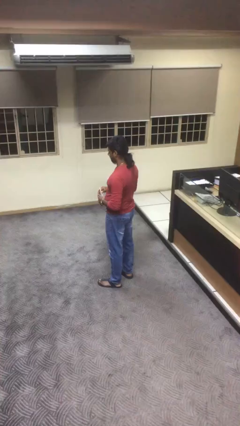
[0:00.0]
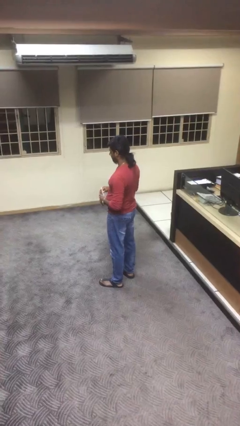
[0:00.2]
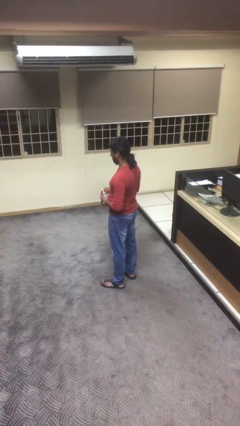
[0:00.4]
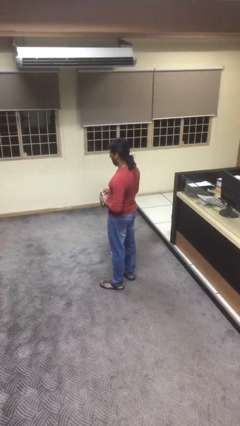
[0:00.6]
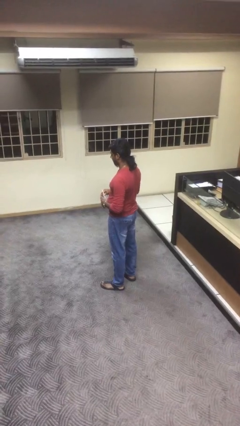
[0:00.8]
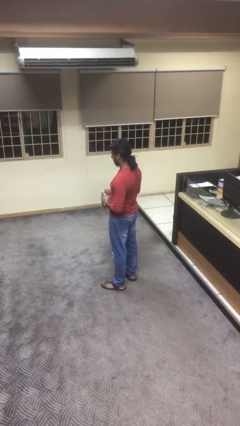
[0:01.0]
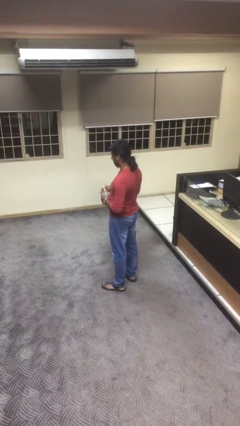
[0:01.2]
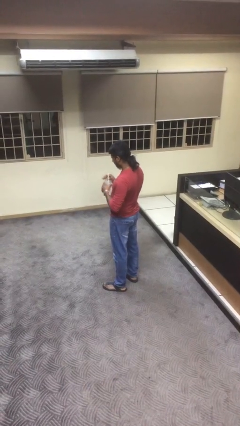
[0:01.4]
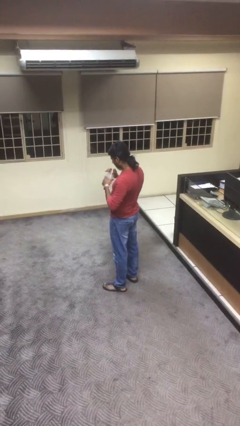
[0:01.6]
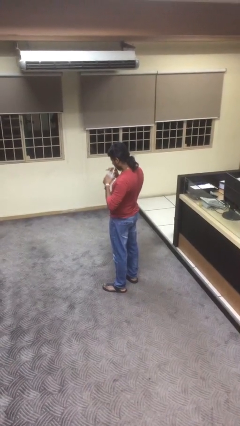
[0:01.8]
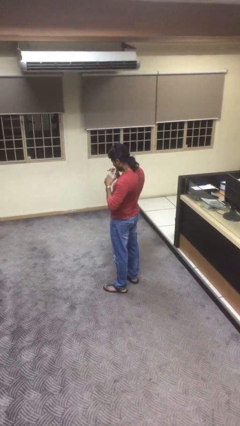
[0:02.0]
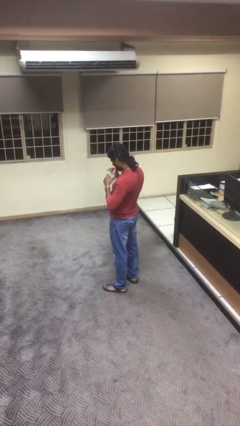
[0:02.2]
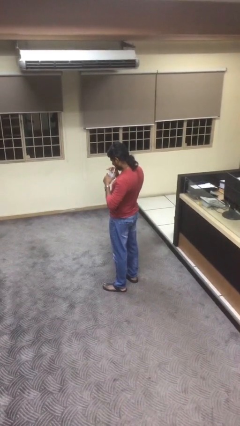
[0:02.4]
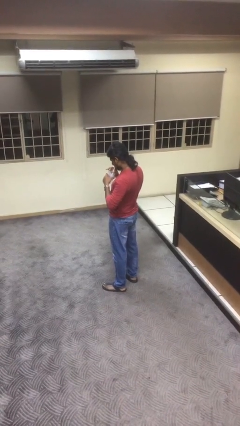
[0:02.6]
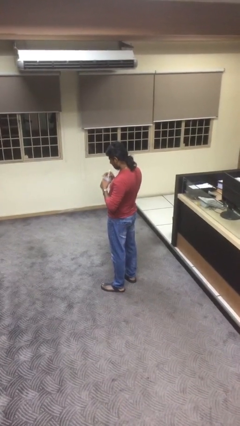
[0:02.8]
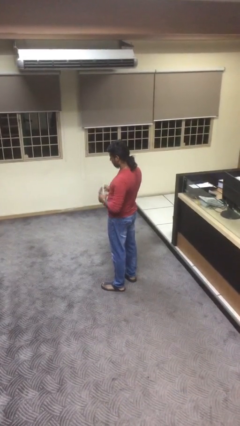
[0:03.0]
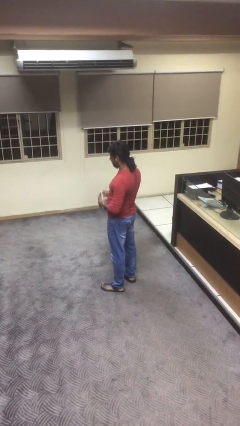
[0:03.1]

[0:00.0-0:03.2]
person drinks from straw

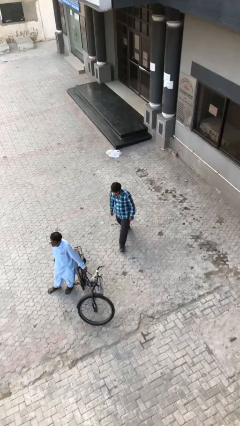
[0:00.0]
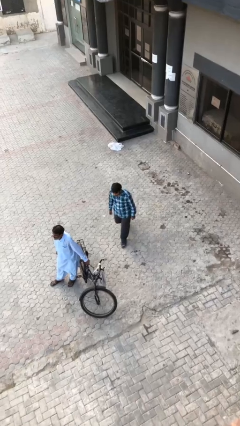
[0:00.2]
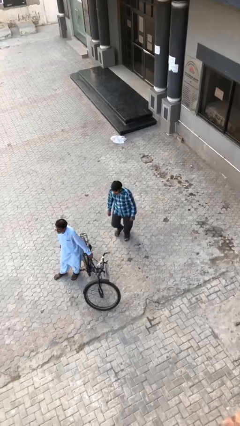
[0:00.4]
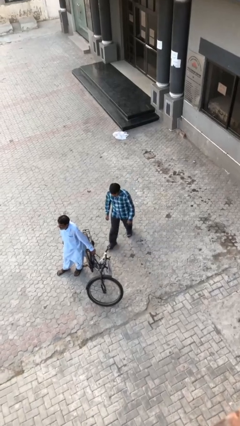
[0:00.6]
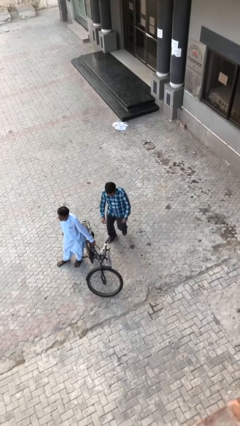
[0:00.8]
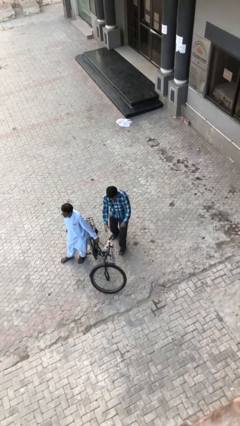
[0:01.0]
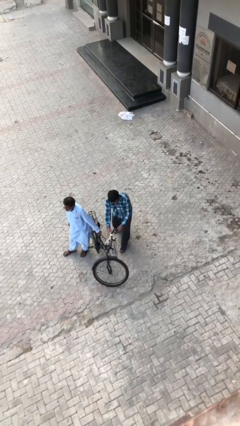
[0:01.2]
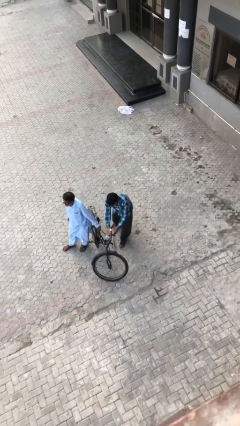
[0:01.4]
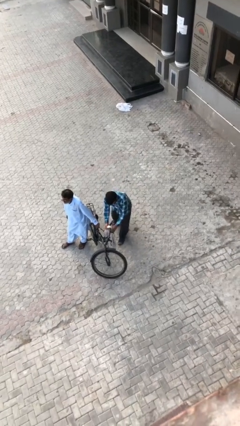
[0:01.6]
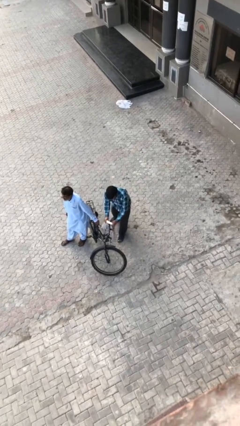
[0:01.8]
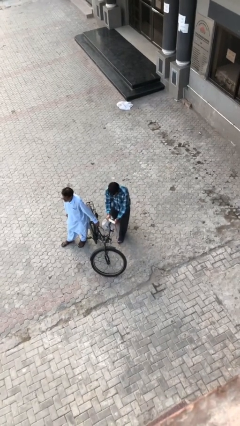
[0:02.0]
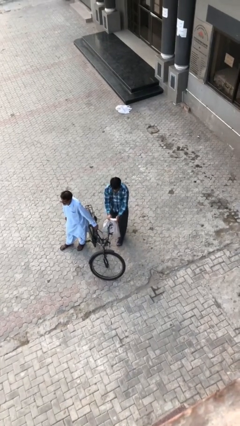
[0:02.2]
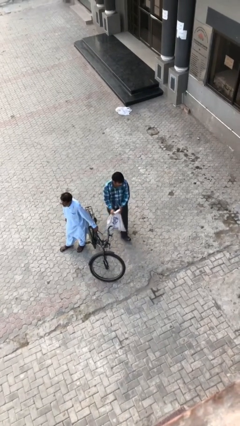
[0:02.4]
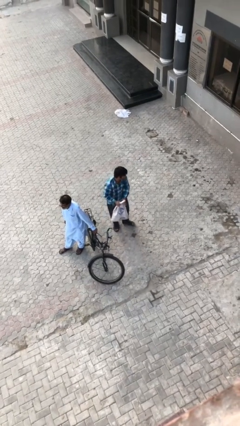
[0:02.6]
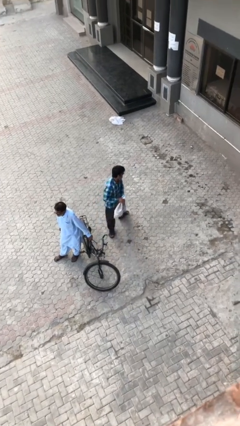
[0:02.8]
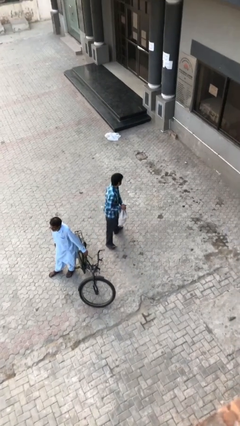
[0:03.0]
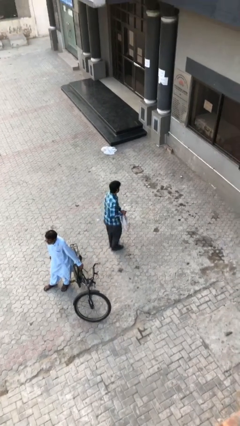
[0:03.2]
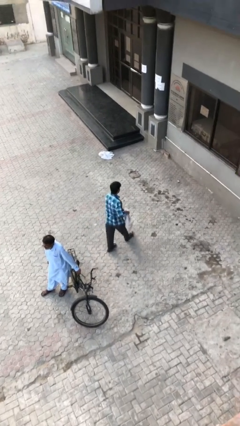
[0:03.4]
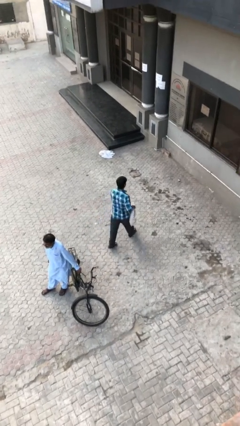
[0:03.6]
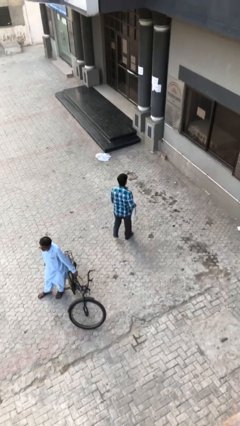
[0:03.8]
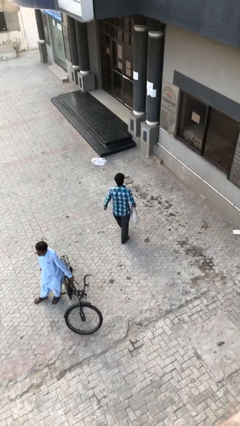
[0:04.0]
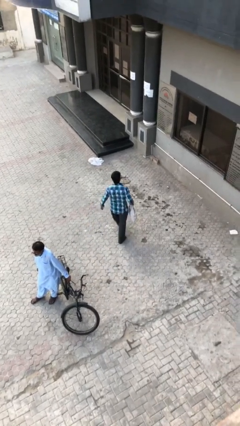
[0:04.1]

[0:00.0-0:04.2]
person steals object from person

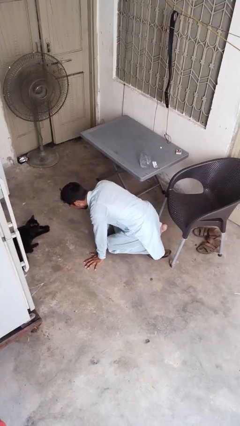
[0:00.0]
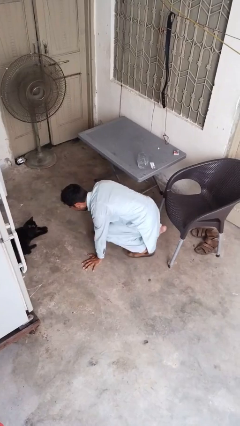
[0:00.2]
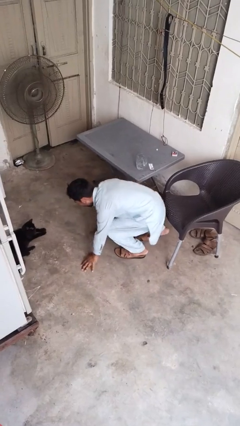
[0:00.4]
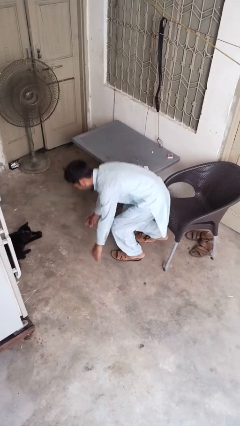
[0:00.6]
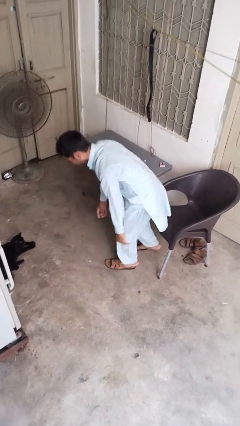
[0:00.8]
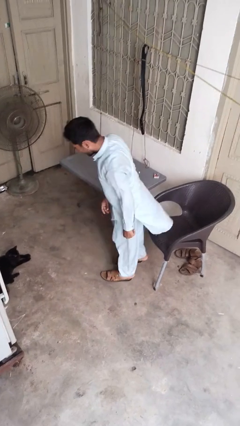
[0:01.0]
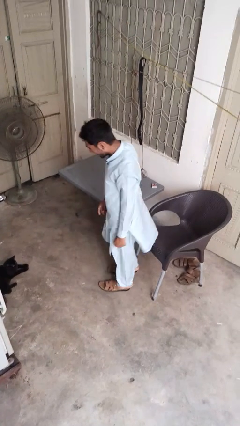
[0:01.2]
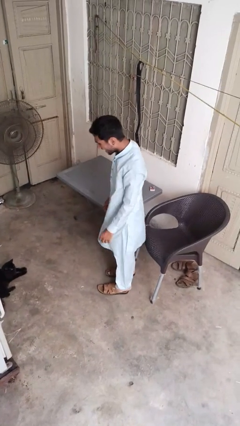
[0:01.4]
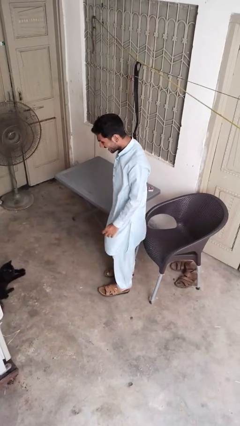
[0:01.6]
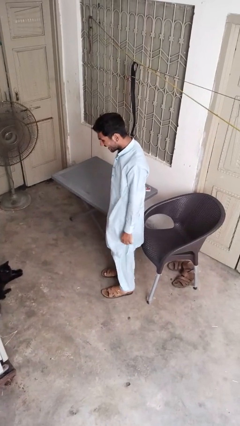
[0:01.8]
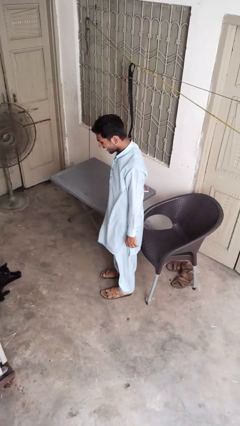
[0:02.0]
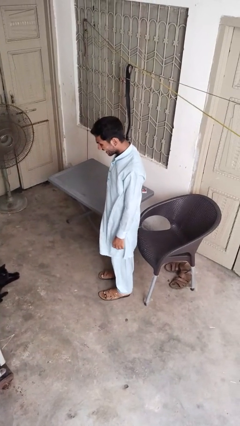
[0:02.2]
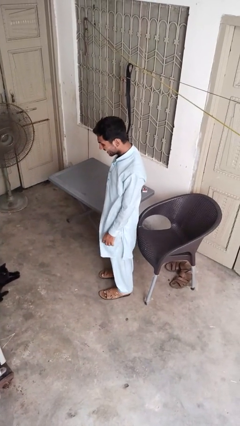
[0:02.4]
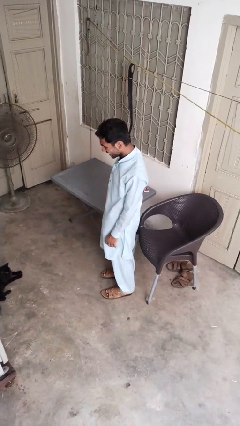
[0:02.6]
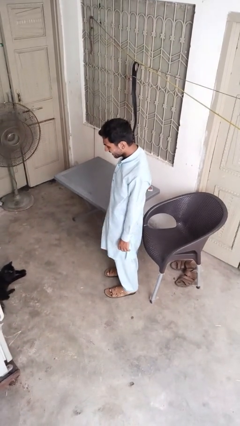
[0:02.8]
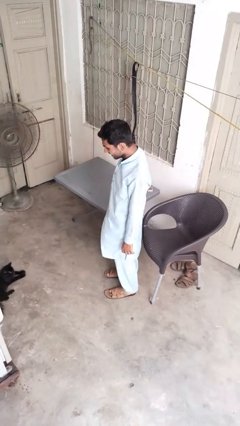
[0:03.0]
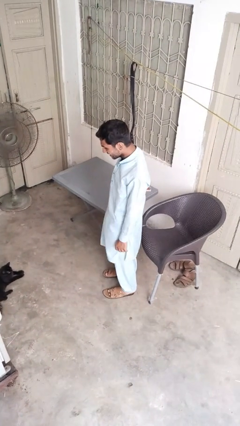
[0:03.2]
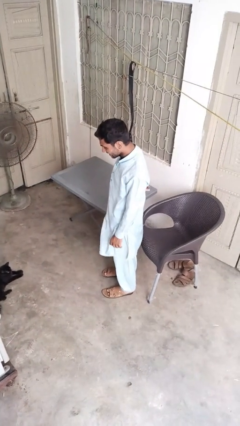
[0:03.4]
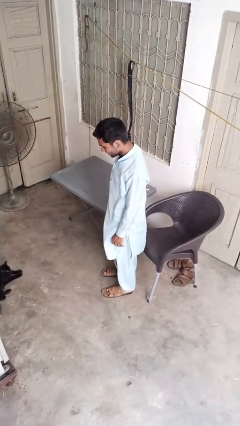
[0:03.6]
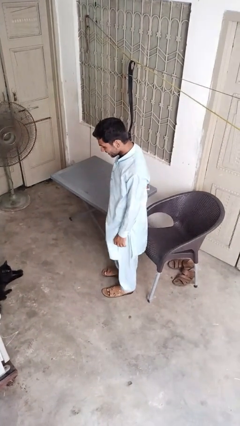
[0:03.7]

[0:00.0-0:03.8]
person stands up from floor

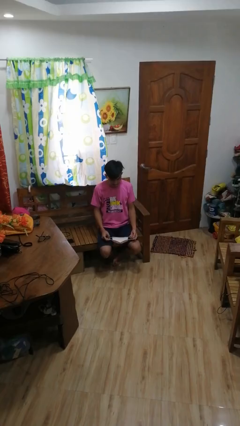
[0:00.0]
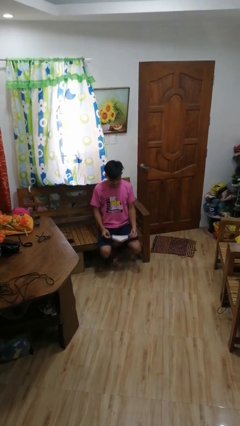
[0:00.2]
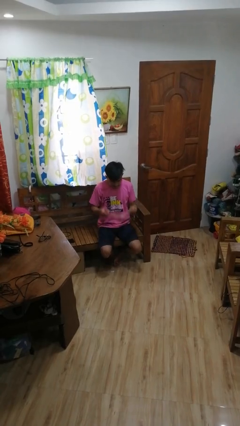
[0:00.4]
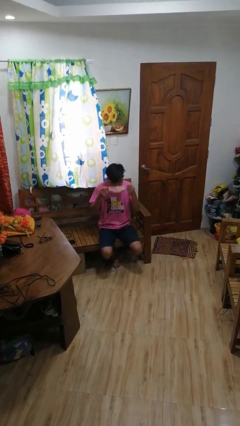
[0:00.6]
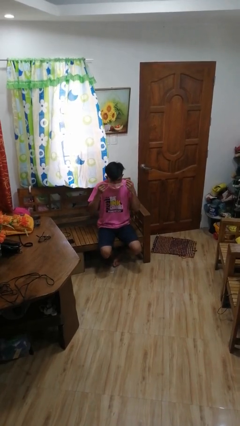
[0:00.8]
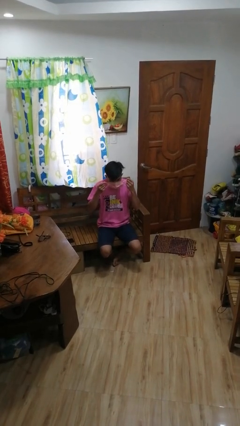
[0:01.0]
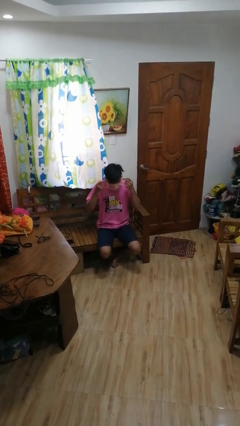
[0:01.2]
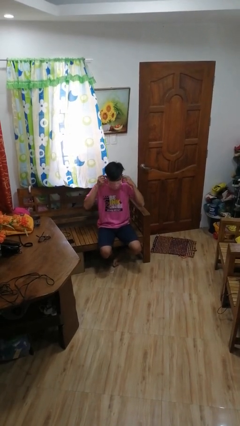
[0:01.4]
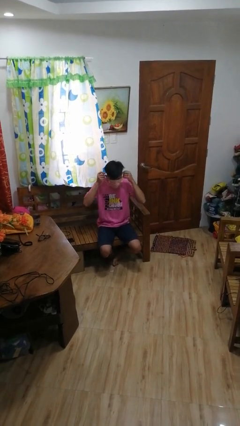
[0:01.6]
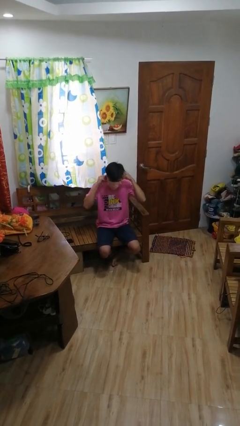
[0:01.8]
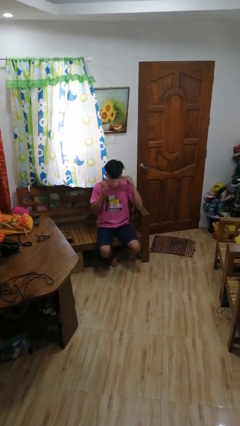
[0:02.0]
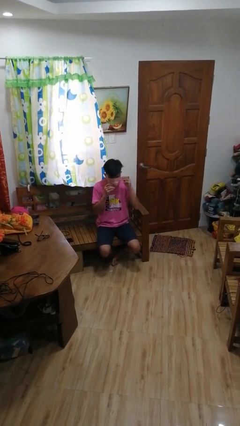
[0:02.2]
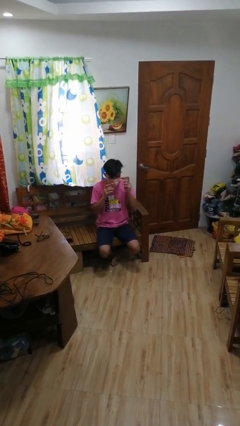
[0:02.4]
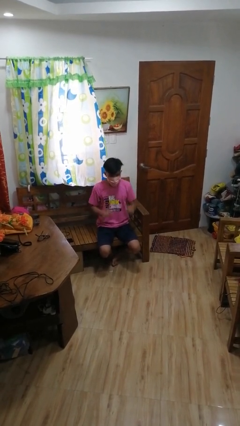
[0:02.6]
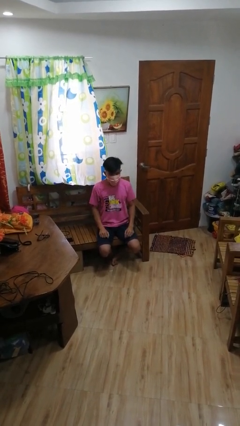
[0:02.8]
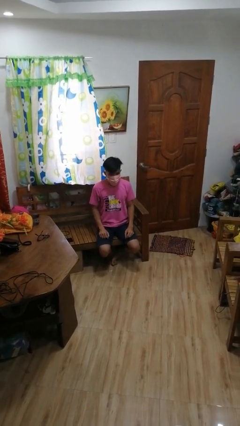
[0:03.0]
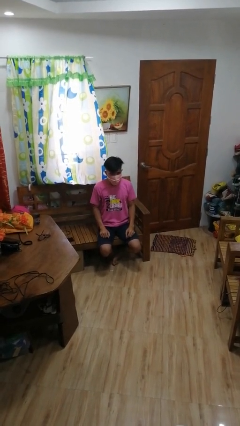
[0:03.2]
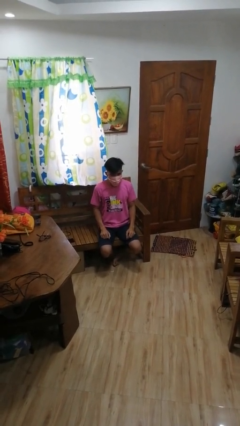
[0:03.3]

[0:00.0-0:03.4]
person puts on facemask

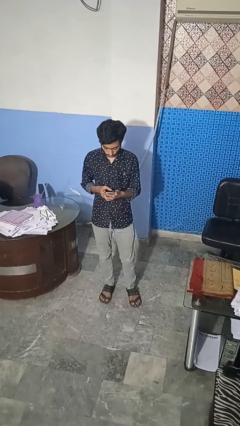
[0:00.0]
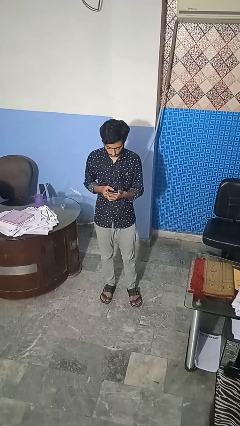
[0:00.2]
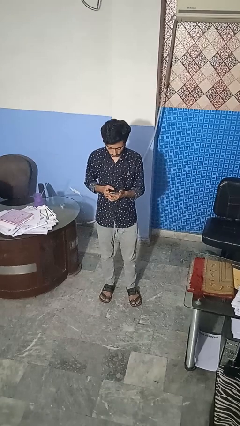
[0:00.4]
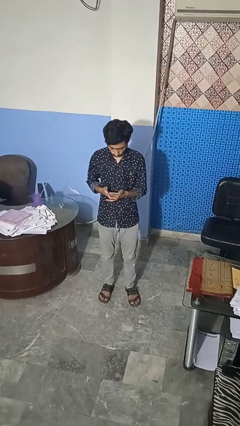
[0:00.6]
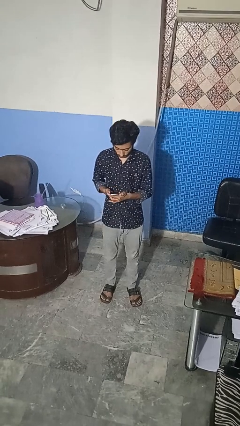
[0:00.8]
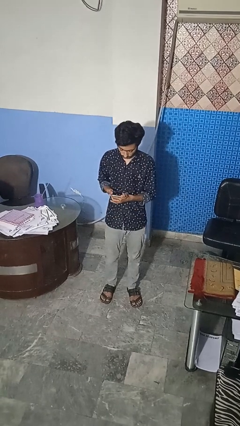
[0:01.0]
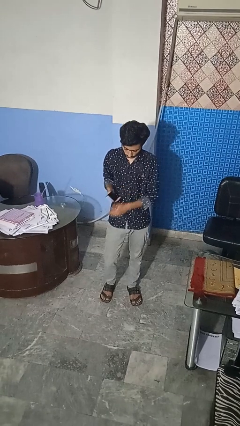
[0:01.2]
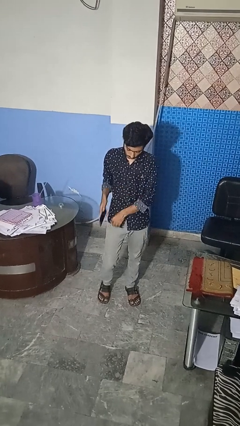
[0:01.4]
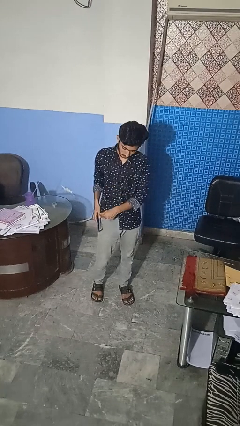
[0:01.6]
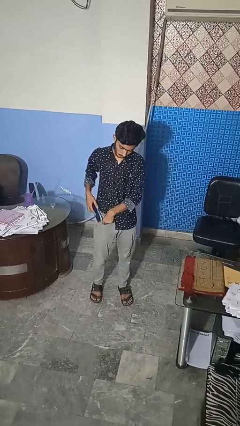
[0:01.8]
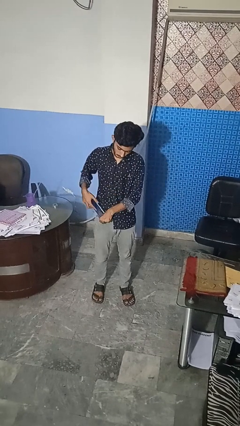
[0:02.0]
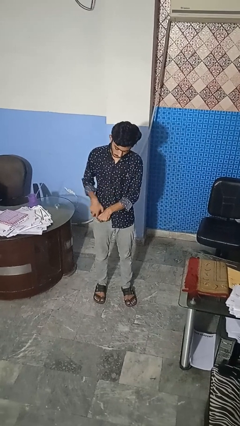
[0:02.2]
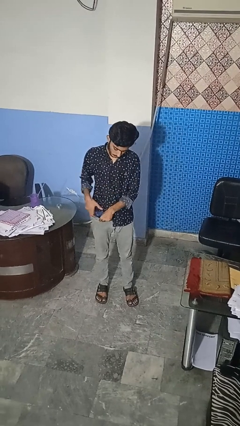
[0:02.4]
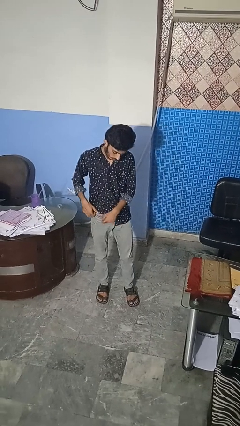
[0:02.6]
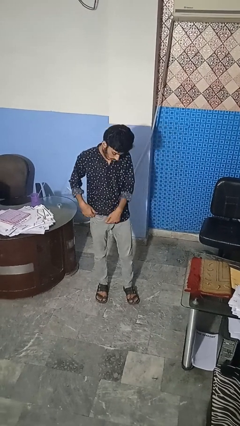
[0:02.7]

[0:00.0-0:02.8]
person puts phone into pocket
